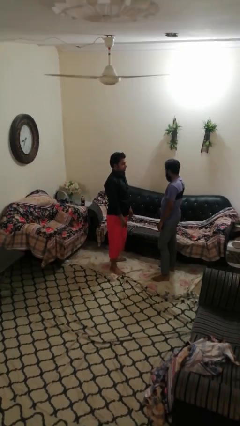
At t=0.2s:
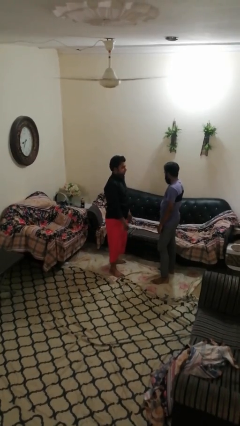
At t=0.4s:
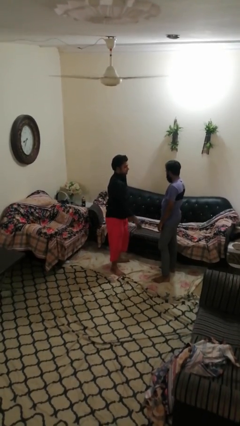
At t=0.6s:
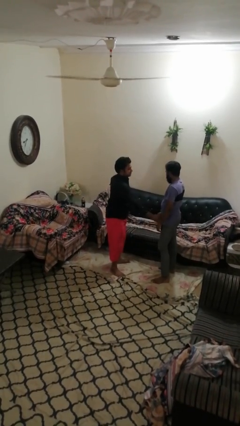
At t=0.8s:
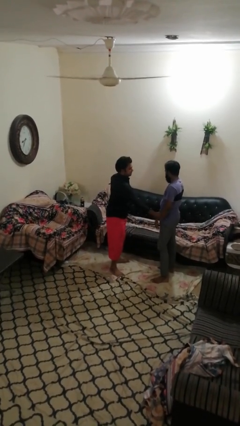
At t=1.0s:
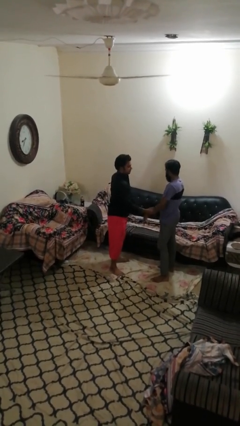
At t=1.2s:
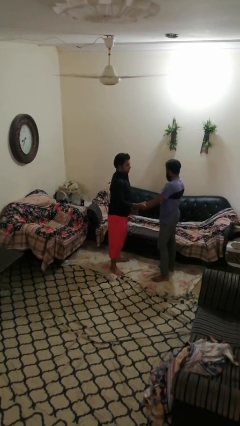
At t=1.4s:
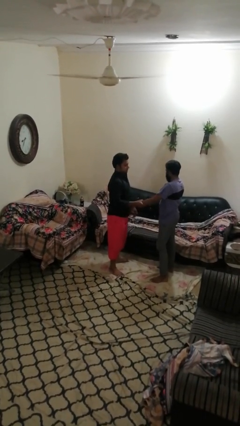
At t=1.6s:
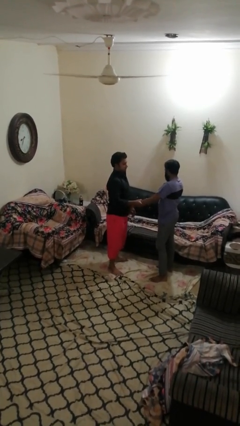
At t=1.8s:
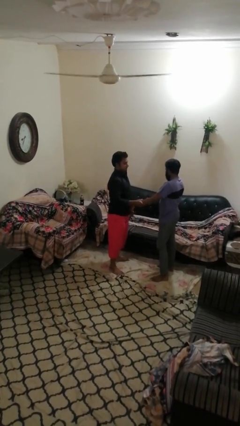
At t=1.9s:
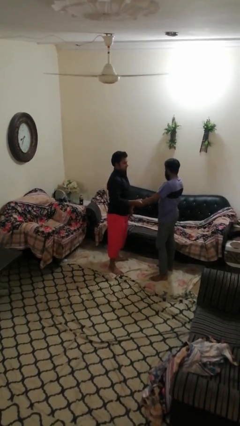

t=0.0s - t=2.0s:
person grabs person by forearm

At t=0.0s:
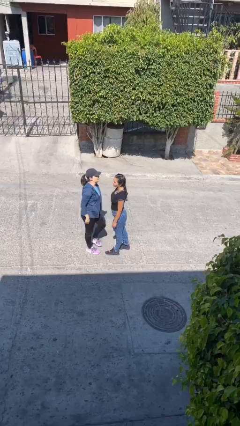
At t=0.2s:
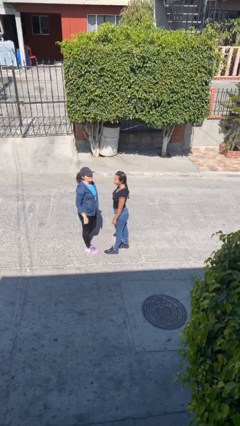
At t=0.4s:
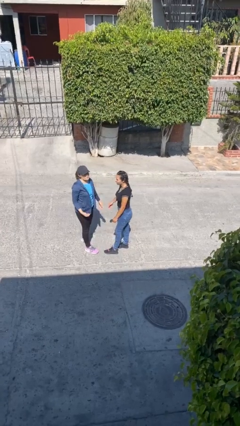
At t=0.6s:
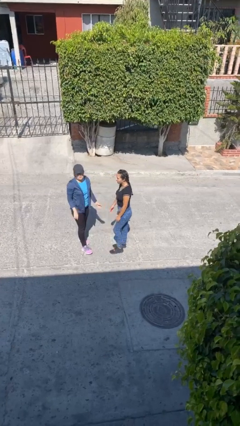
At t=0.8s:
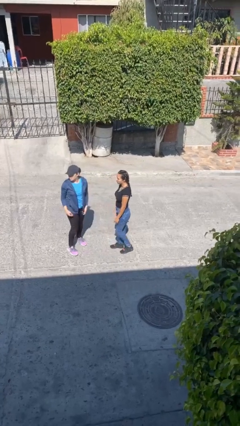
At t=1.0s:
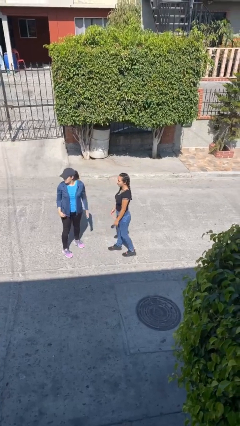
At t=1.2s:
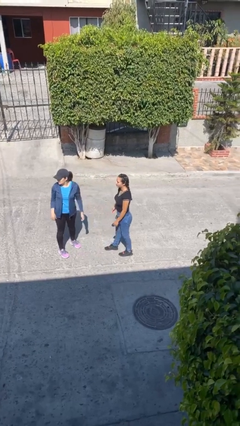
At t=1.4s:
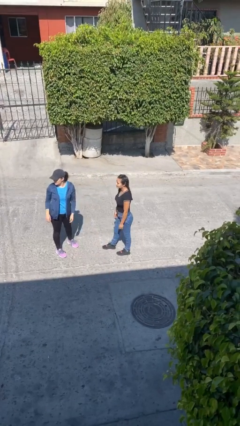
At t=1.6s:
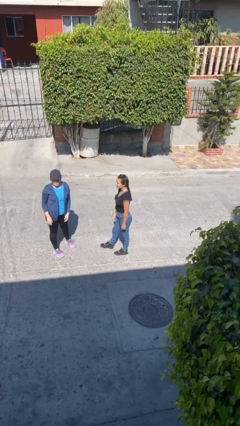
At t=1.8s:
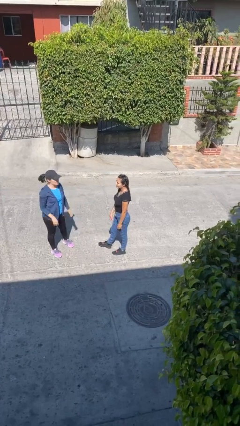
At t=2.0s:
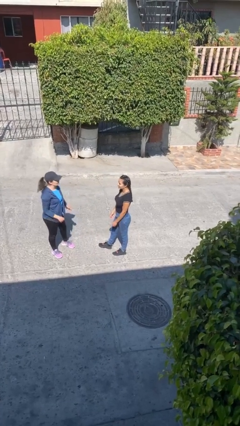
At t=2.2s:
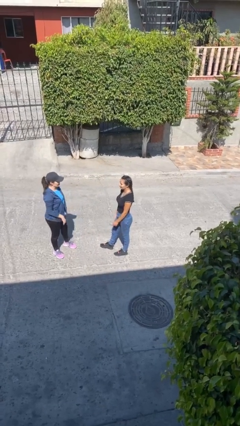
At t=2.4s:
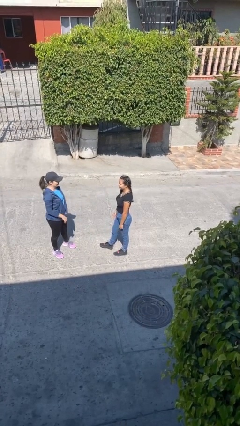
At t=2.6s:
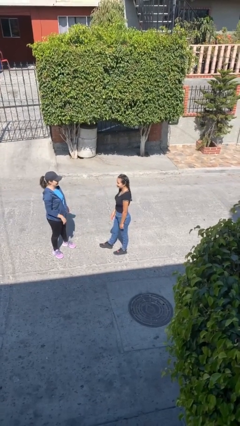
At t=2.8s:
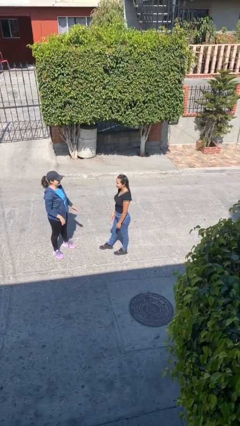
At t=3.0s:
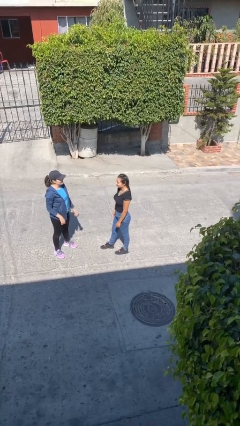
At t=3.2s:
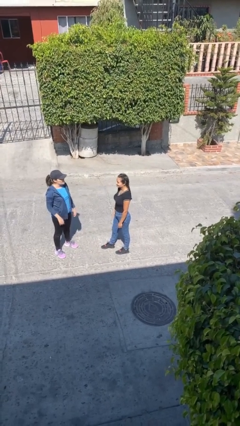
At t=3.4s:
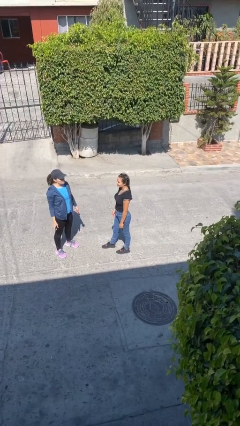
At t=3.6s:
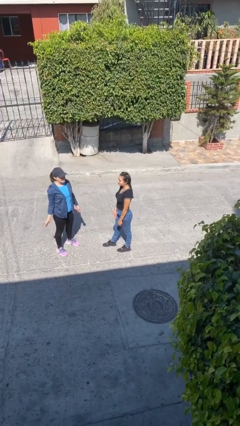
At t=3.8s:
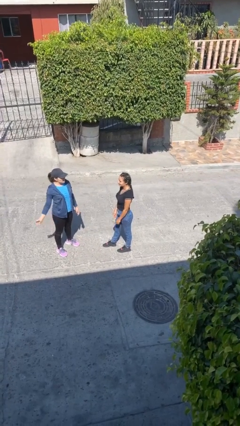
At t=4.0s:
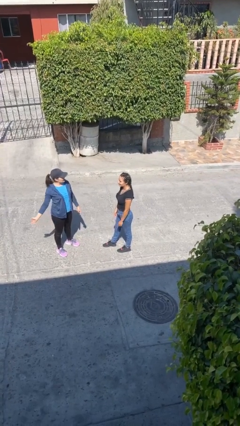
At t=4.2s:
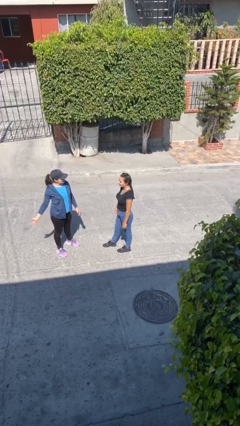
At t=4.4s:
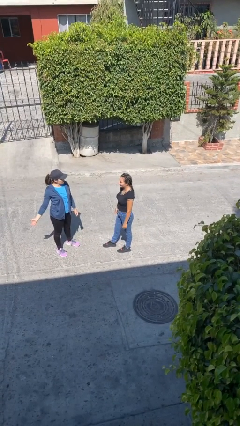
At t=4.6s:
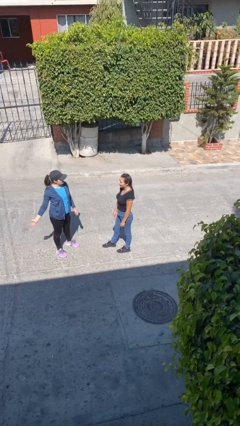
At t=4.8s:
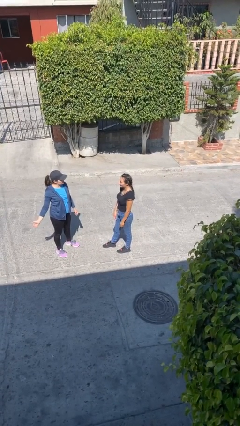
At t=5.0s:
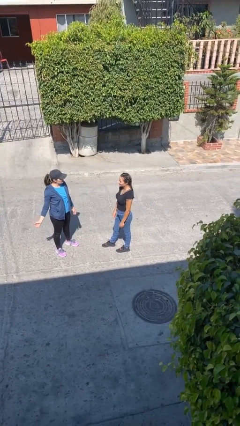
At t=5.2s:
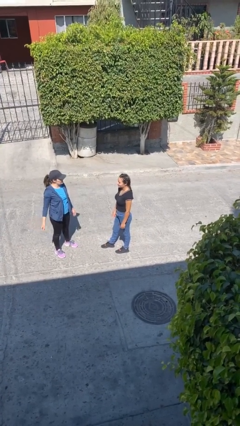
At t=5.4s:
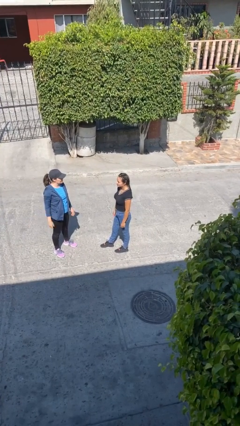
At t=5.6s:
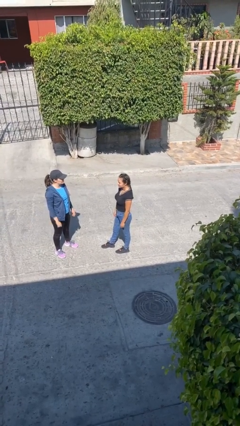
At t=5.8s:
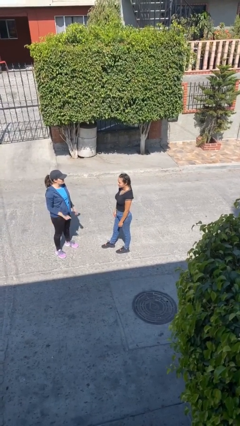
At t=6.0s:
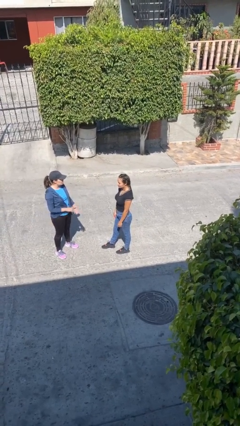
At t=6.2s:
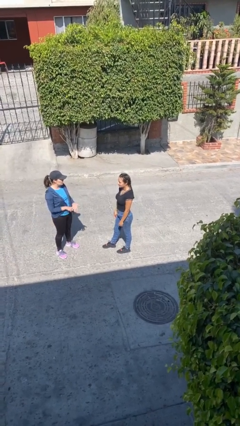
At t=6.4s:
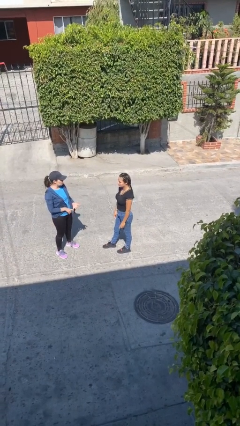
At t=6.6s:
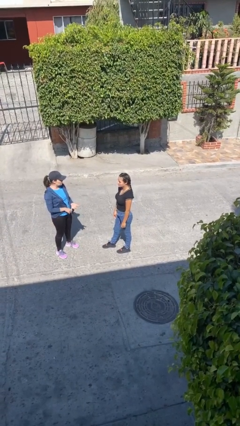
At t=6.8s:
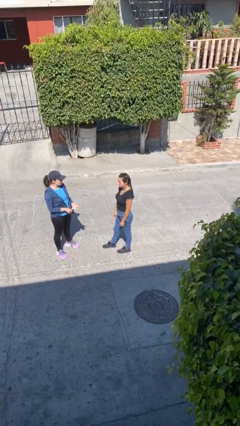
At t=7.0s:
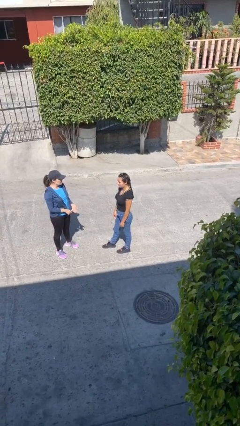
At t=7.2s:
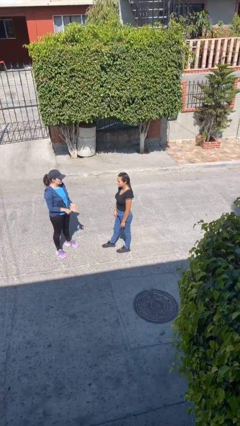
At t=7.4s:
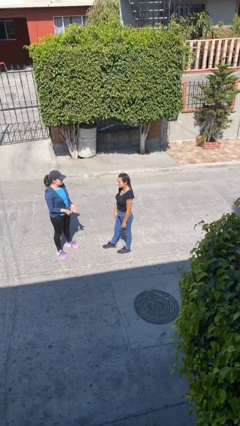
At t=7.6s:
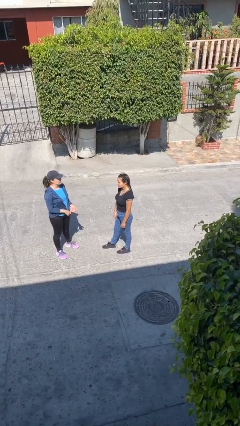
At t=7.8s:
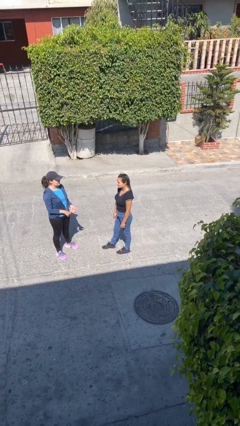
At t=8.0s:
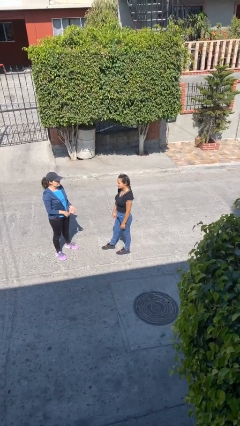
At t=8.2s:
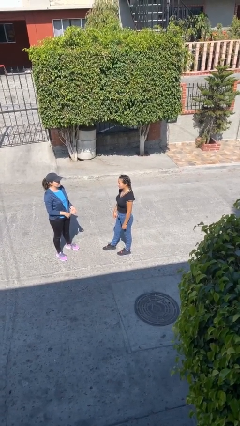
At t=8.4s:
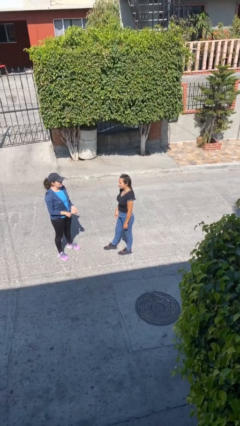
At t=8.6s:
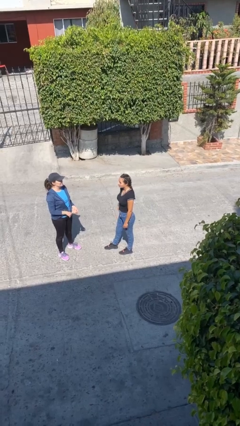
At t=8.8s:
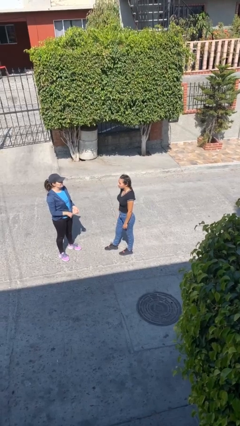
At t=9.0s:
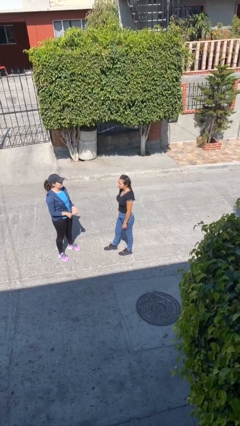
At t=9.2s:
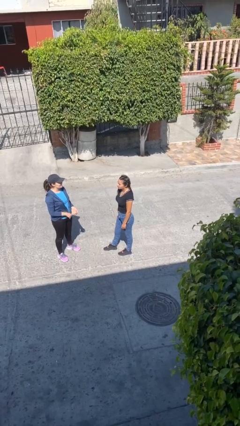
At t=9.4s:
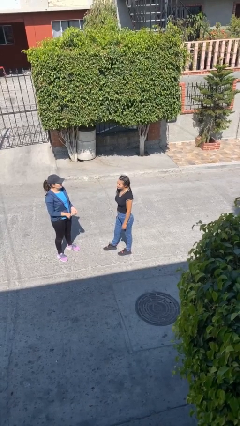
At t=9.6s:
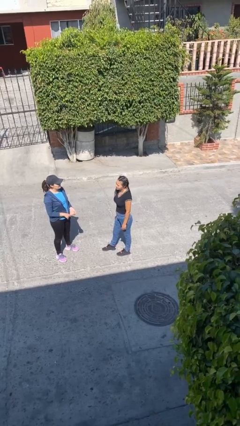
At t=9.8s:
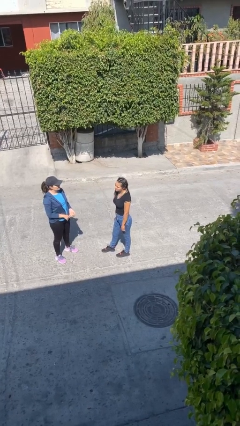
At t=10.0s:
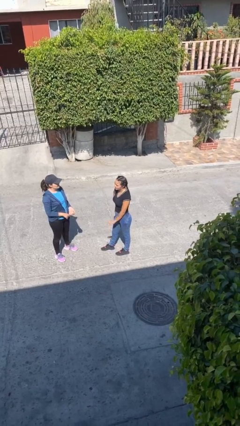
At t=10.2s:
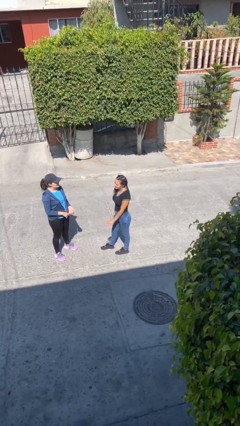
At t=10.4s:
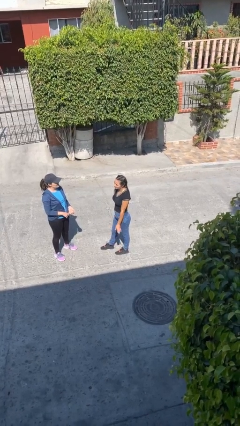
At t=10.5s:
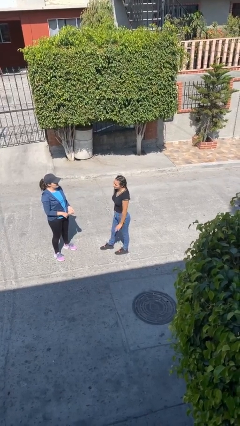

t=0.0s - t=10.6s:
person talks to person

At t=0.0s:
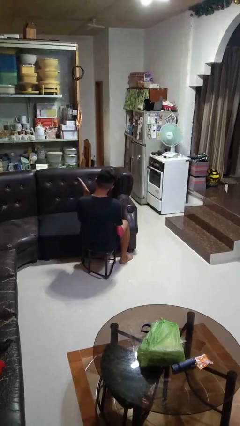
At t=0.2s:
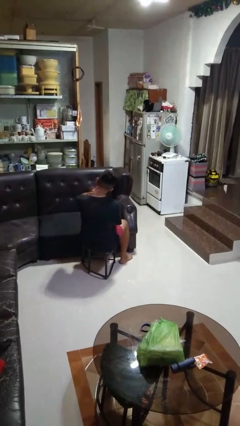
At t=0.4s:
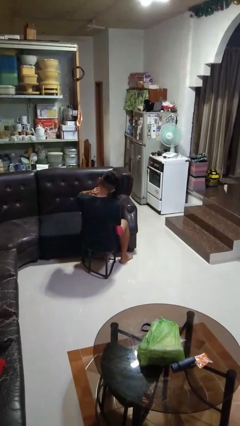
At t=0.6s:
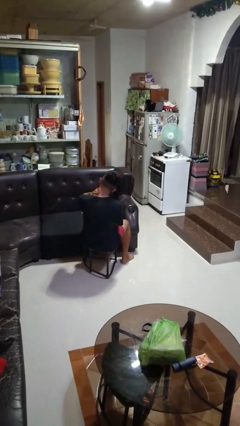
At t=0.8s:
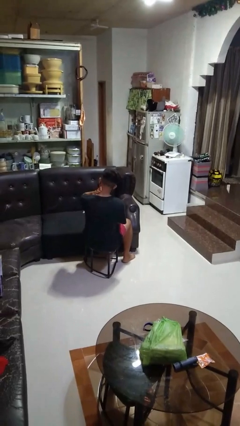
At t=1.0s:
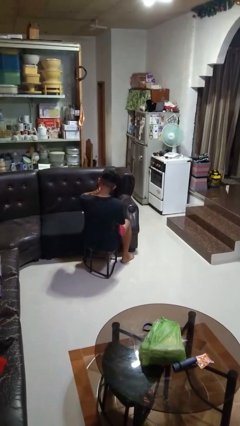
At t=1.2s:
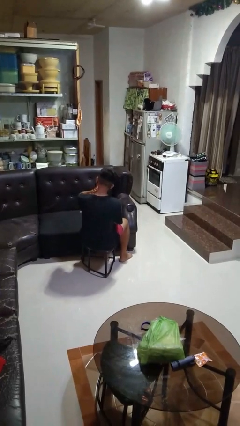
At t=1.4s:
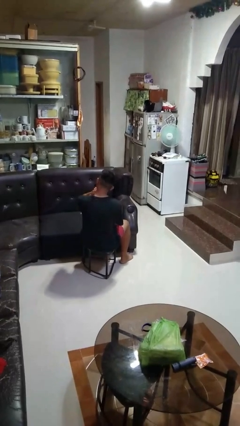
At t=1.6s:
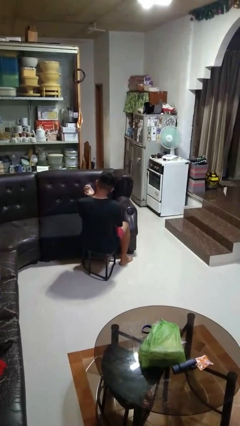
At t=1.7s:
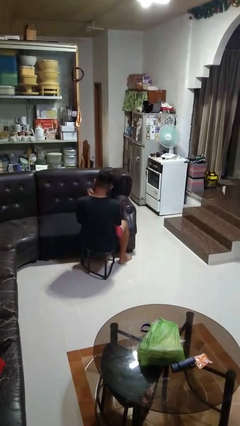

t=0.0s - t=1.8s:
person swats bug

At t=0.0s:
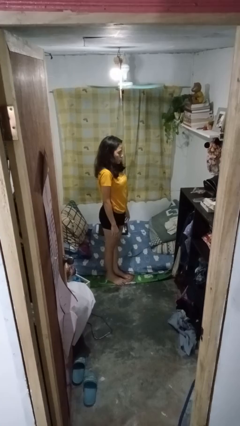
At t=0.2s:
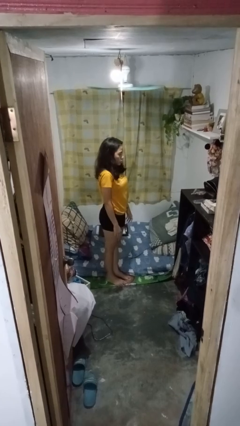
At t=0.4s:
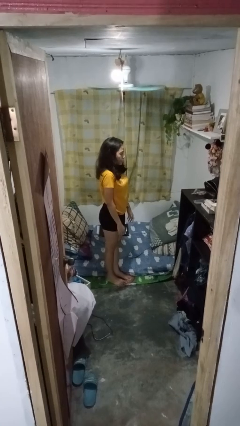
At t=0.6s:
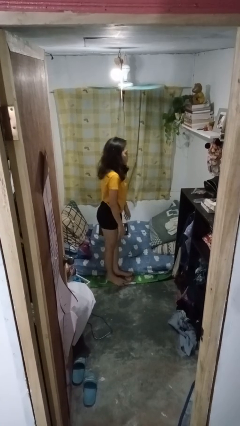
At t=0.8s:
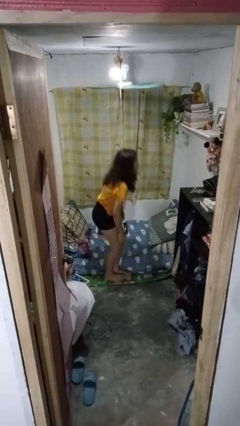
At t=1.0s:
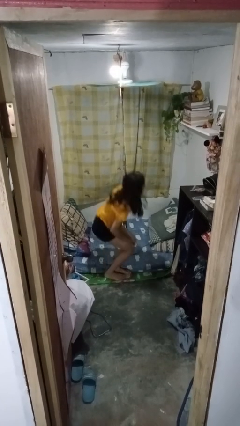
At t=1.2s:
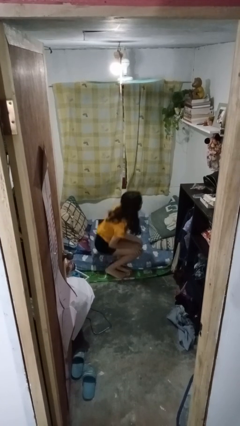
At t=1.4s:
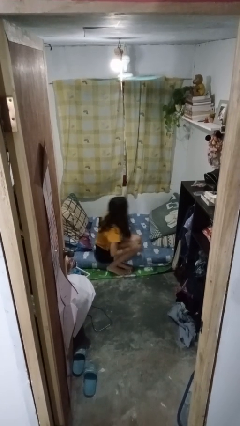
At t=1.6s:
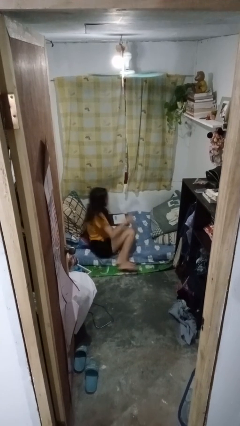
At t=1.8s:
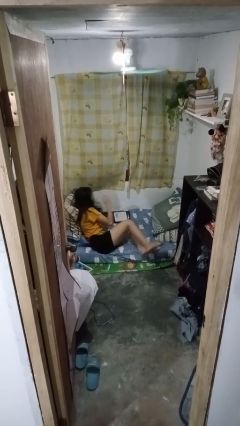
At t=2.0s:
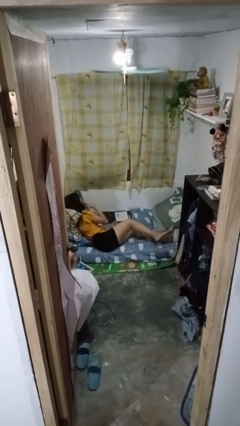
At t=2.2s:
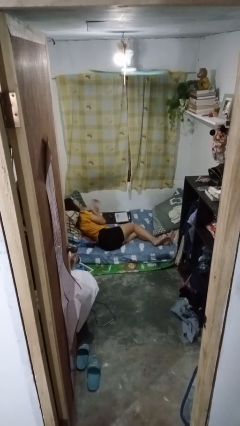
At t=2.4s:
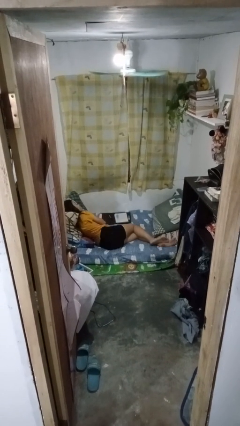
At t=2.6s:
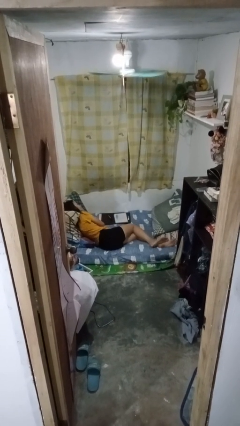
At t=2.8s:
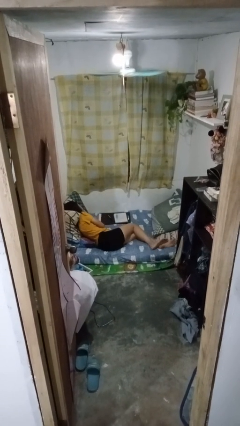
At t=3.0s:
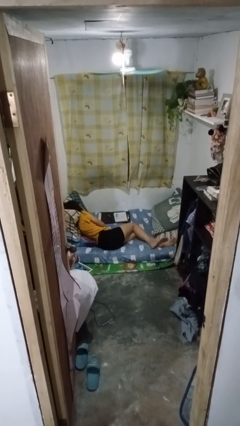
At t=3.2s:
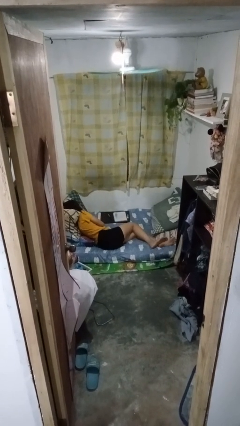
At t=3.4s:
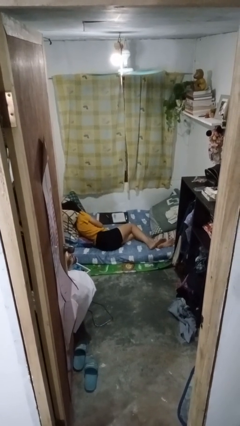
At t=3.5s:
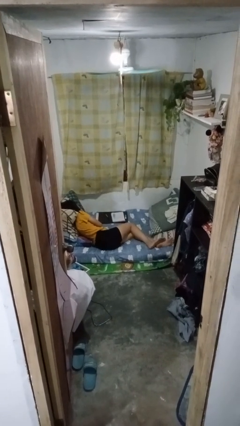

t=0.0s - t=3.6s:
person lies down on bed
